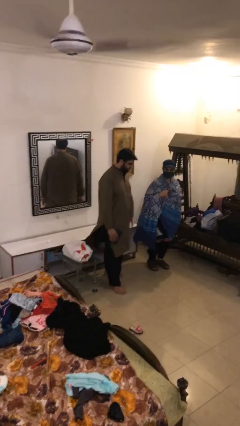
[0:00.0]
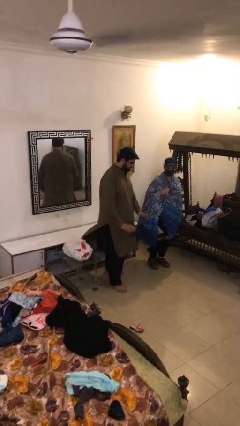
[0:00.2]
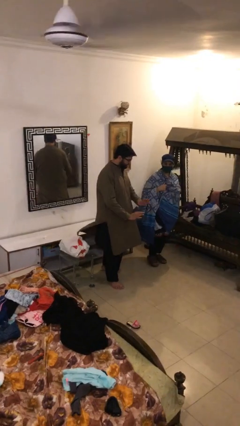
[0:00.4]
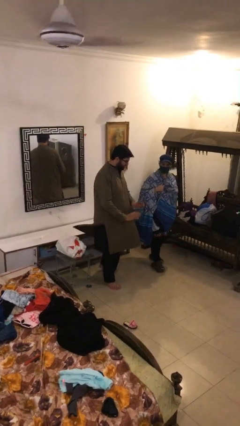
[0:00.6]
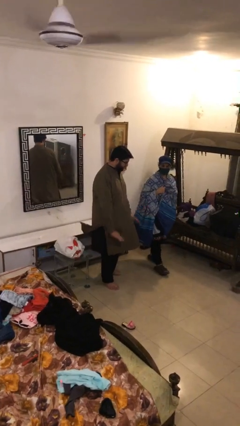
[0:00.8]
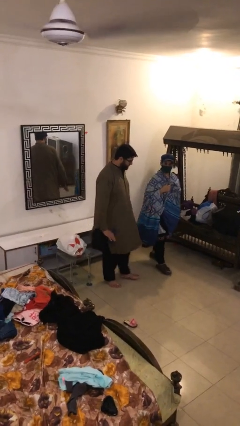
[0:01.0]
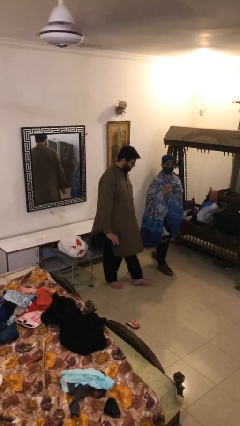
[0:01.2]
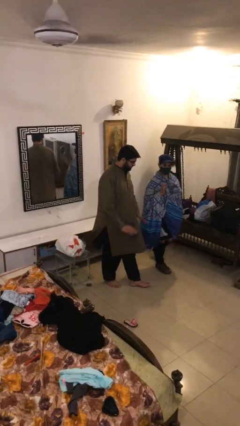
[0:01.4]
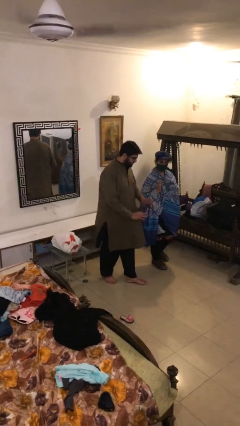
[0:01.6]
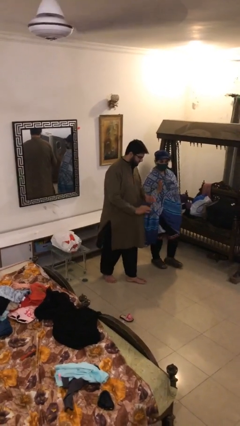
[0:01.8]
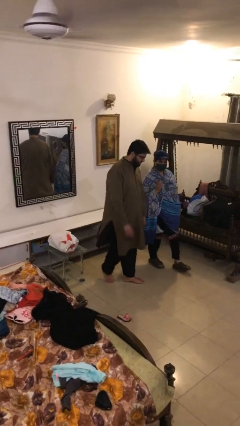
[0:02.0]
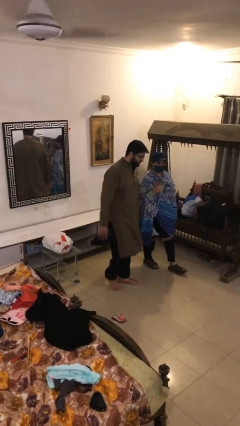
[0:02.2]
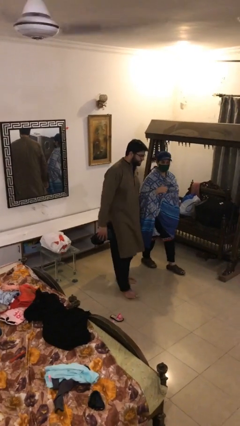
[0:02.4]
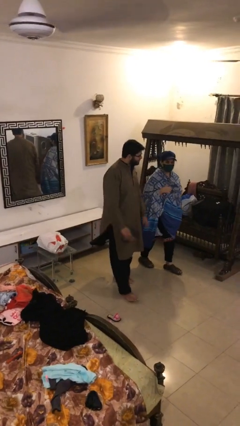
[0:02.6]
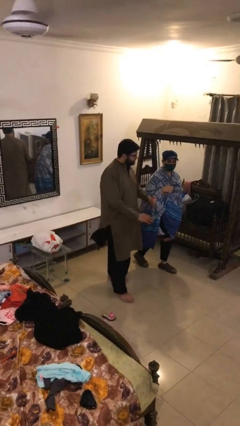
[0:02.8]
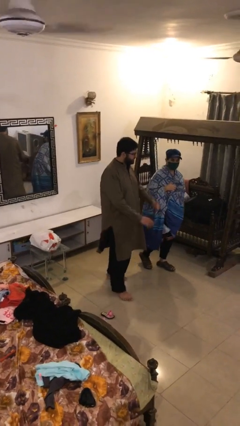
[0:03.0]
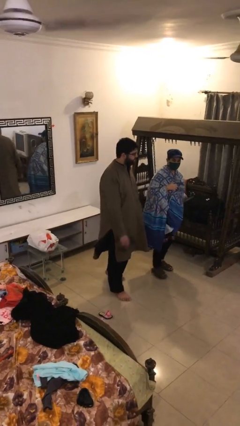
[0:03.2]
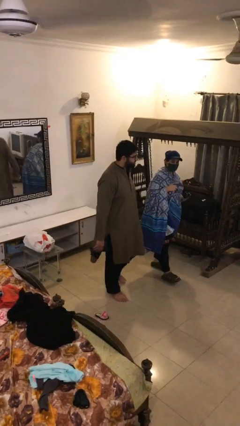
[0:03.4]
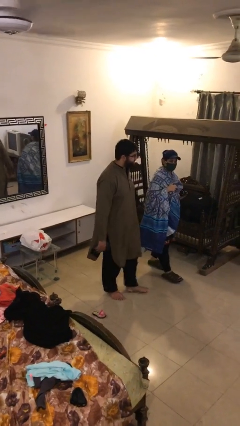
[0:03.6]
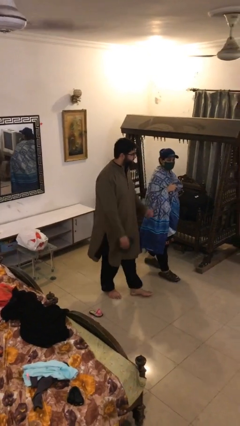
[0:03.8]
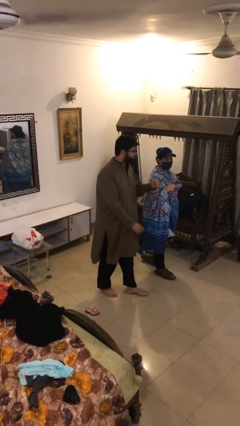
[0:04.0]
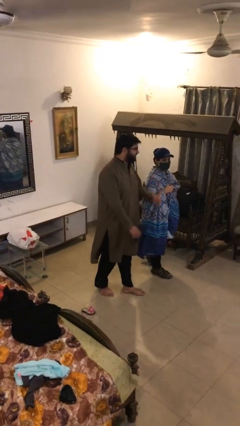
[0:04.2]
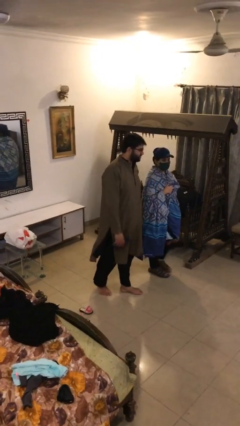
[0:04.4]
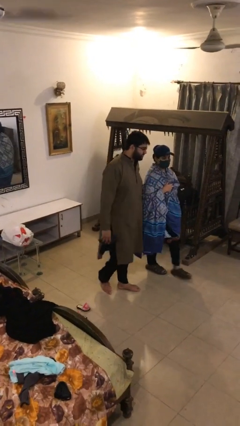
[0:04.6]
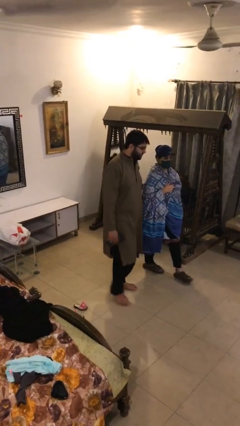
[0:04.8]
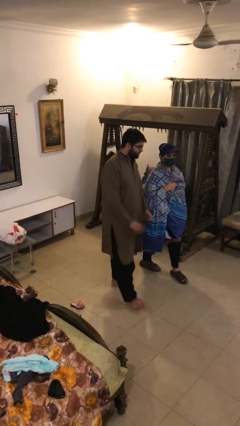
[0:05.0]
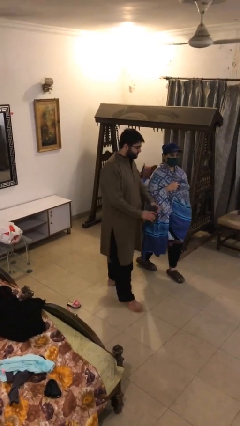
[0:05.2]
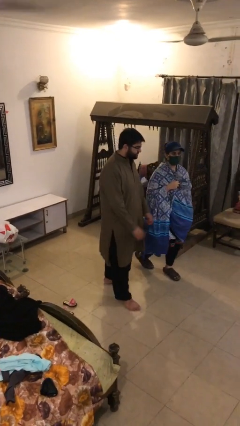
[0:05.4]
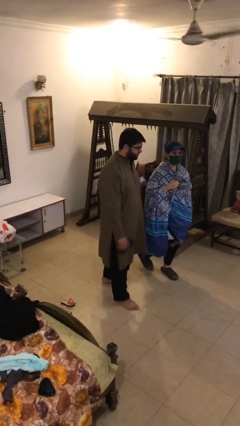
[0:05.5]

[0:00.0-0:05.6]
person talks to person

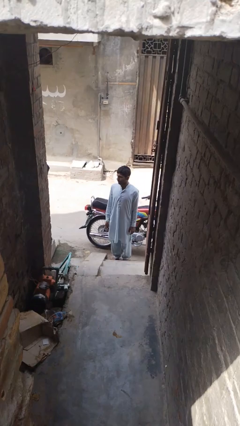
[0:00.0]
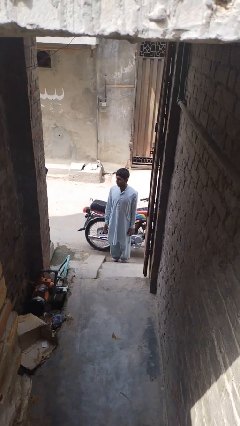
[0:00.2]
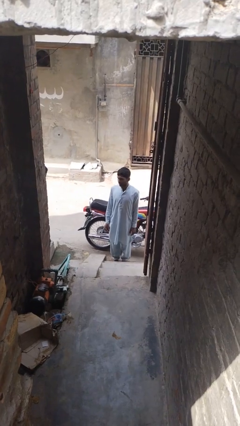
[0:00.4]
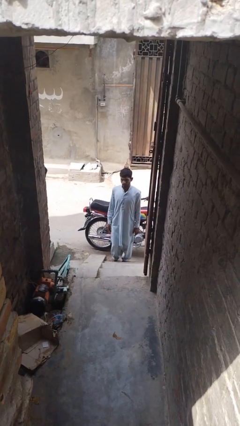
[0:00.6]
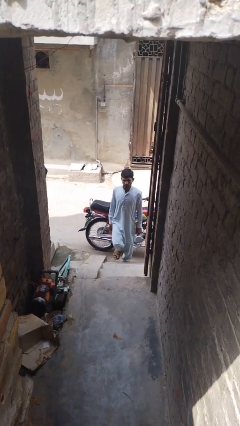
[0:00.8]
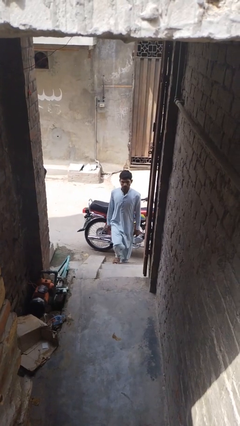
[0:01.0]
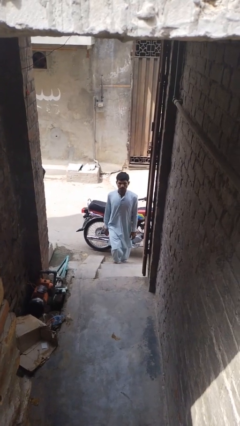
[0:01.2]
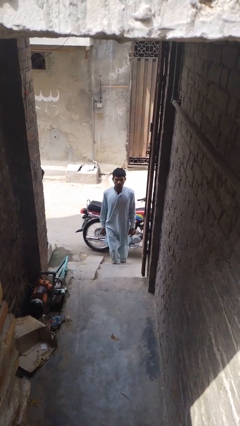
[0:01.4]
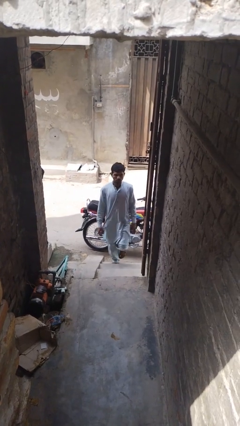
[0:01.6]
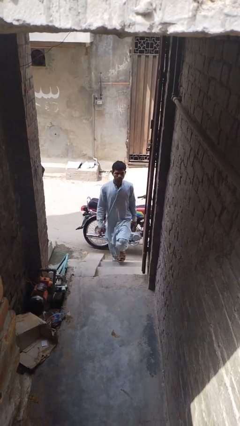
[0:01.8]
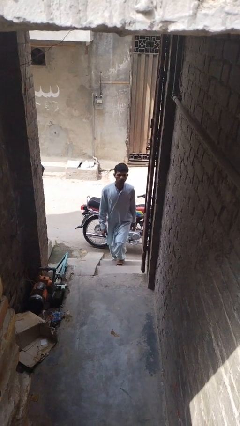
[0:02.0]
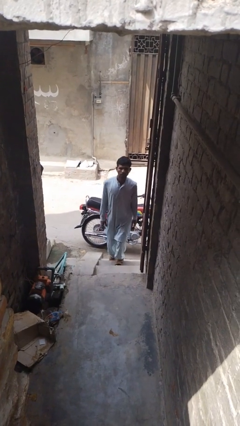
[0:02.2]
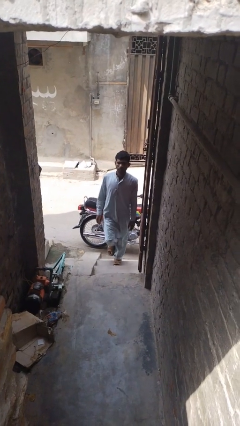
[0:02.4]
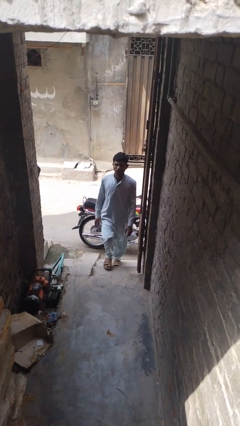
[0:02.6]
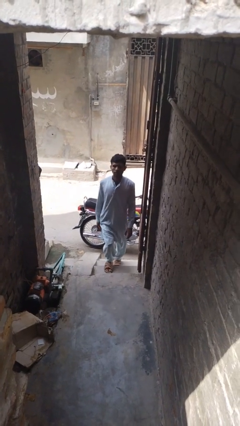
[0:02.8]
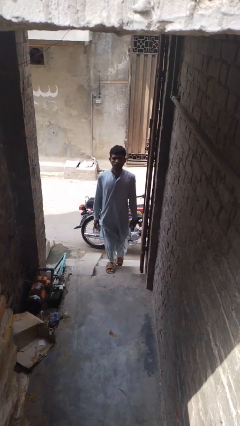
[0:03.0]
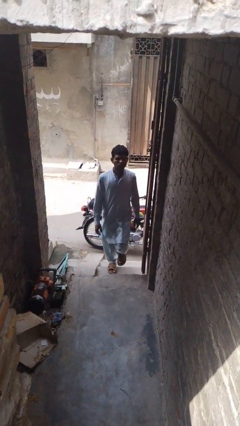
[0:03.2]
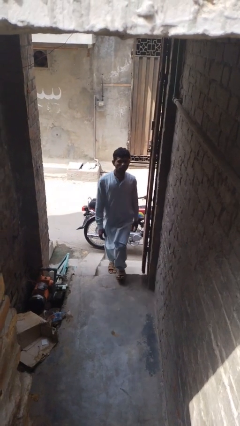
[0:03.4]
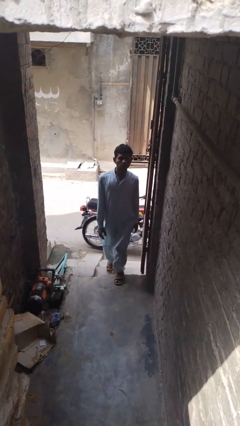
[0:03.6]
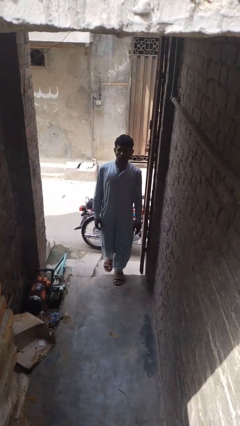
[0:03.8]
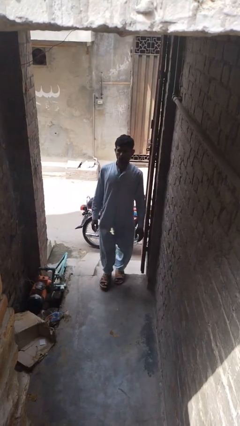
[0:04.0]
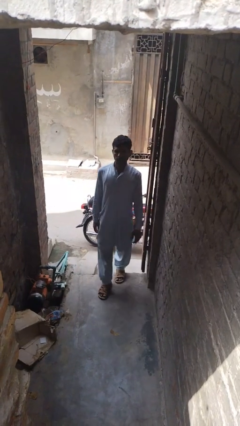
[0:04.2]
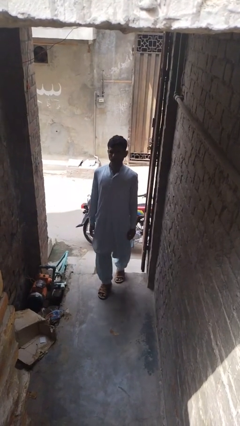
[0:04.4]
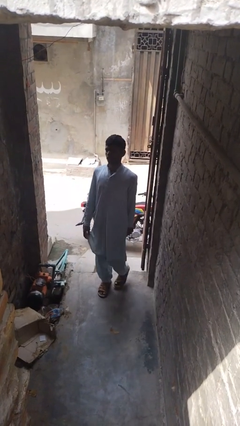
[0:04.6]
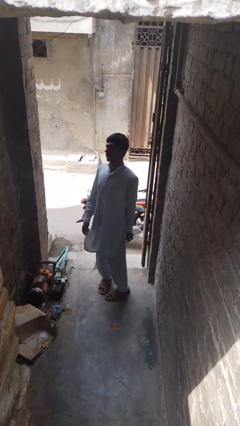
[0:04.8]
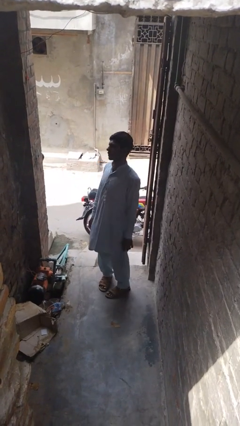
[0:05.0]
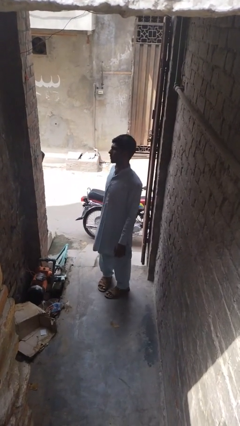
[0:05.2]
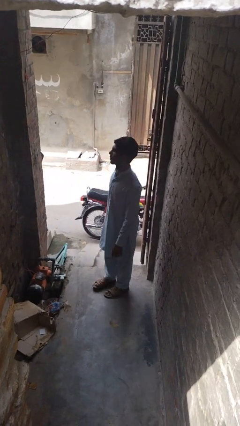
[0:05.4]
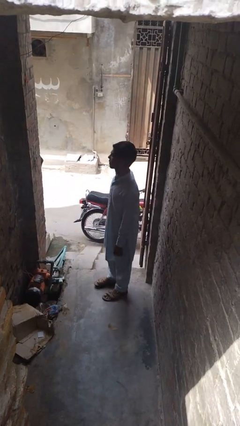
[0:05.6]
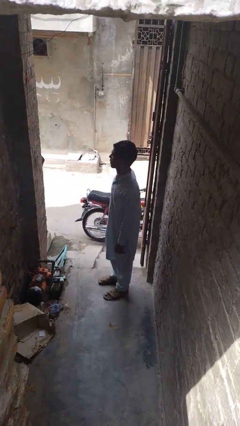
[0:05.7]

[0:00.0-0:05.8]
person climbs up stairs

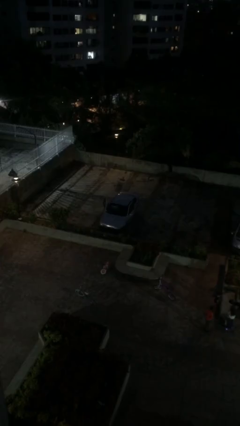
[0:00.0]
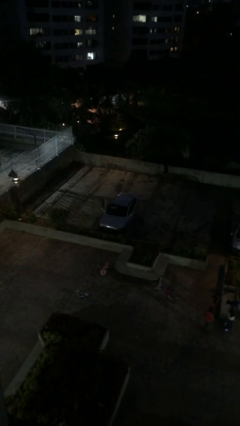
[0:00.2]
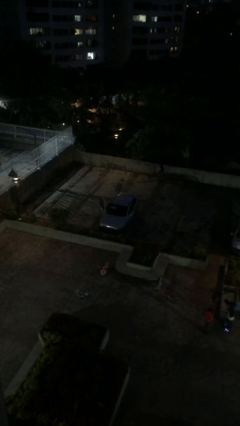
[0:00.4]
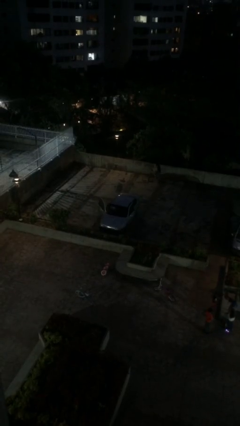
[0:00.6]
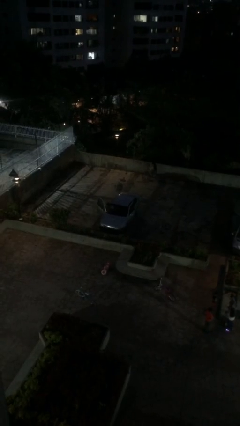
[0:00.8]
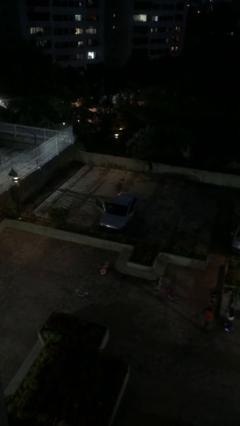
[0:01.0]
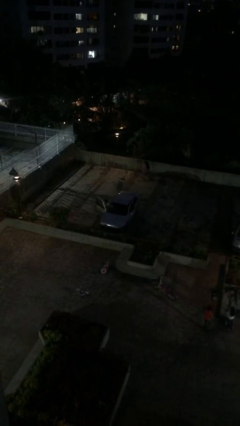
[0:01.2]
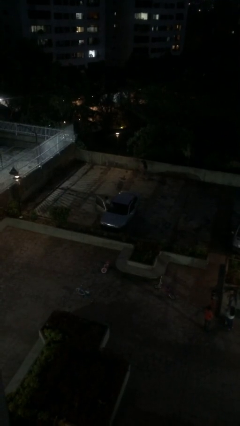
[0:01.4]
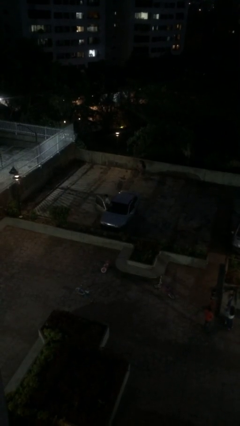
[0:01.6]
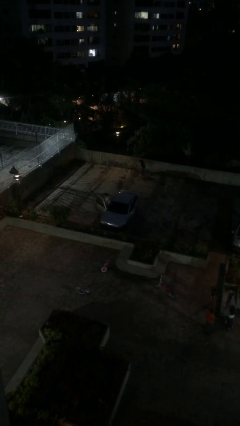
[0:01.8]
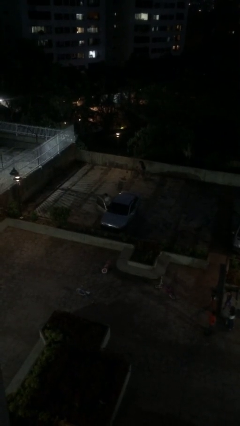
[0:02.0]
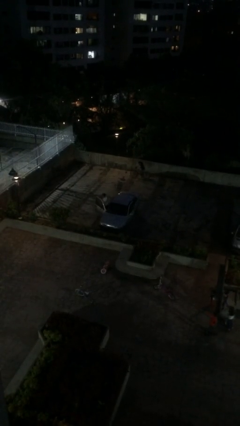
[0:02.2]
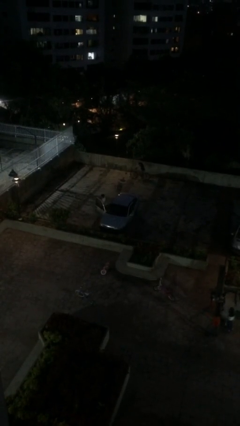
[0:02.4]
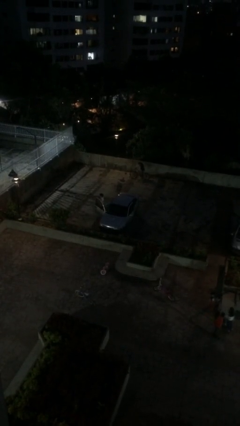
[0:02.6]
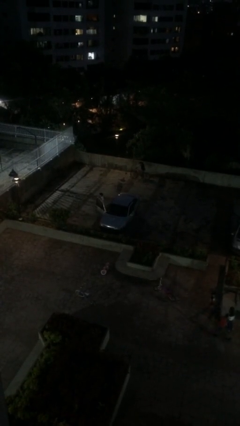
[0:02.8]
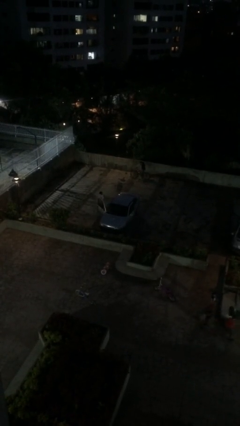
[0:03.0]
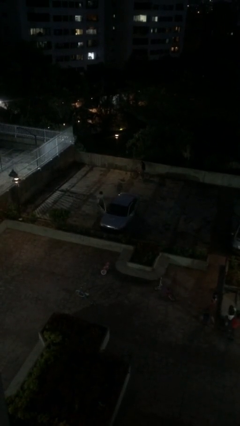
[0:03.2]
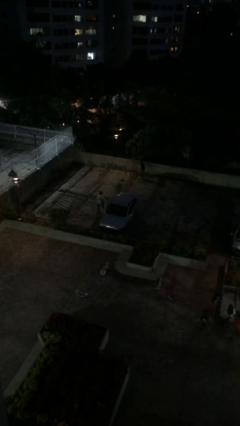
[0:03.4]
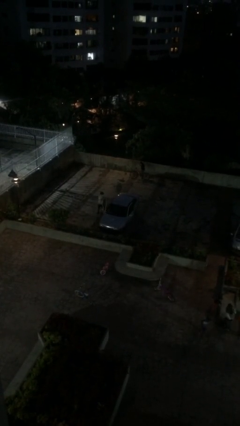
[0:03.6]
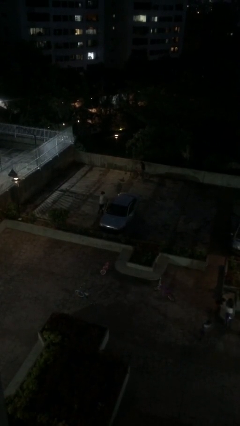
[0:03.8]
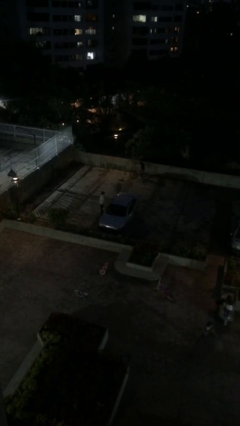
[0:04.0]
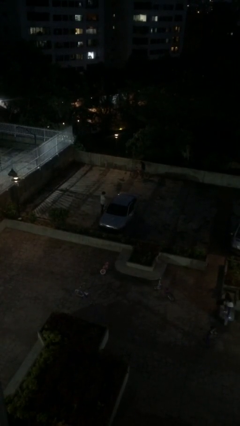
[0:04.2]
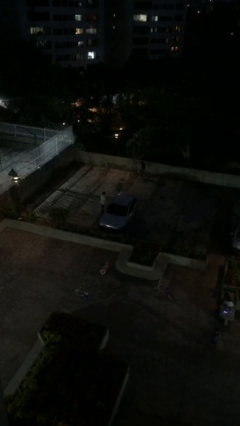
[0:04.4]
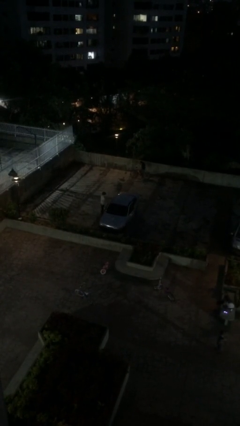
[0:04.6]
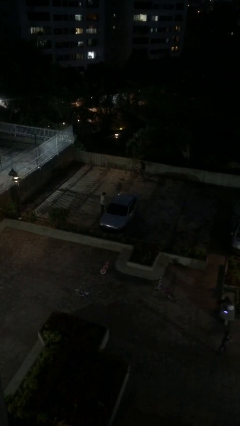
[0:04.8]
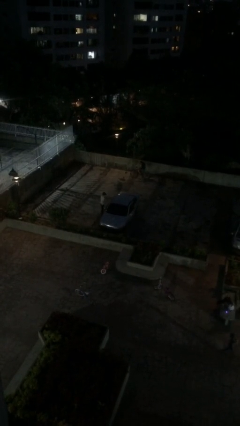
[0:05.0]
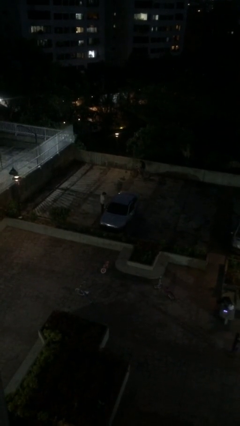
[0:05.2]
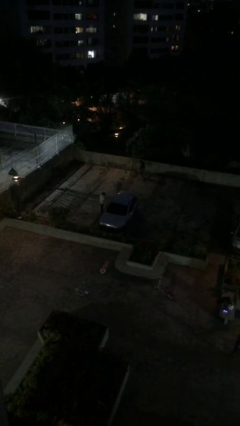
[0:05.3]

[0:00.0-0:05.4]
car drops off person

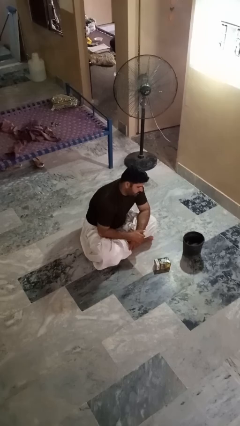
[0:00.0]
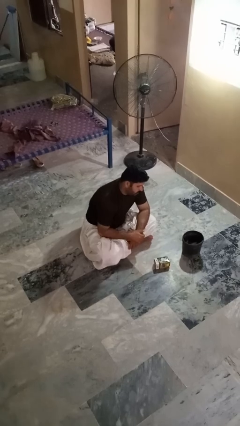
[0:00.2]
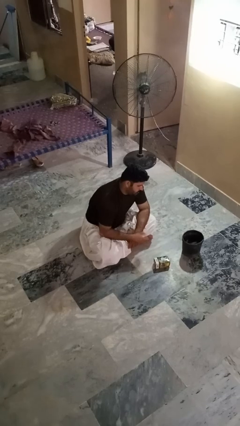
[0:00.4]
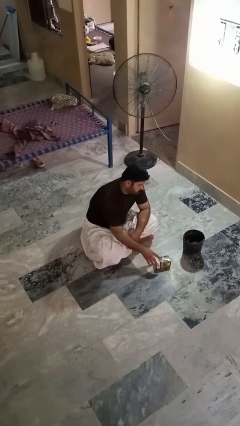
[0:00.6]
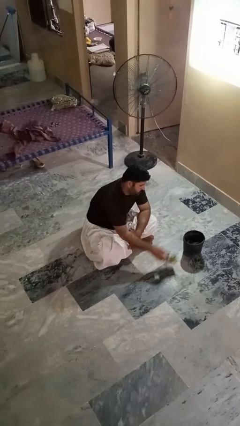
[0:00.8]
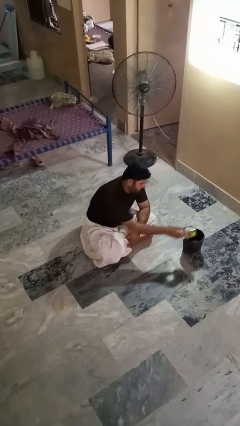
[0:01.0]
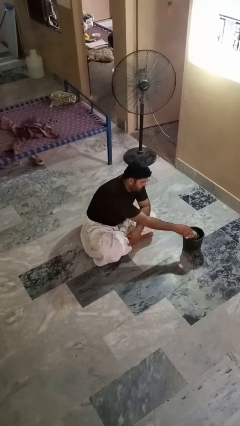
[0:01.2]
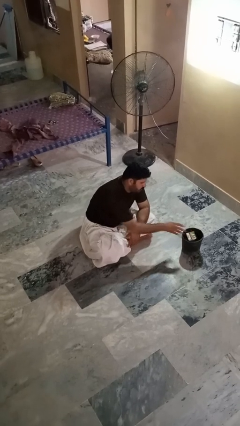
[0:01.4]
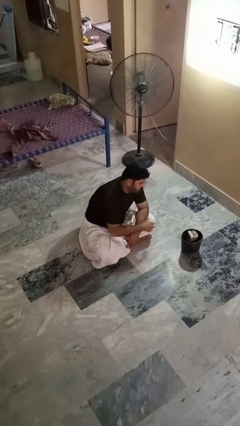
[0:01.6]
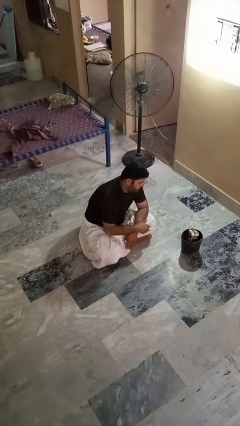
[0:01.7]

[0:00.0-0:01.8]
person puts object into basket
